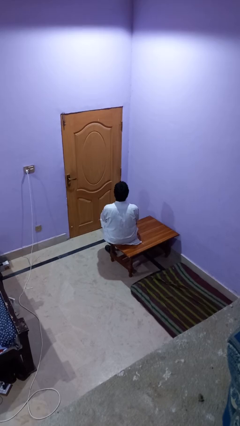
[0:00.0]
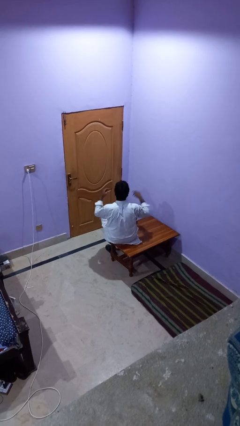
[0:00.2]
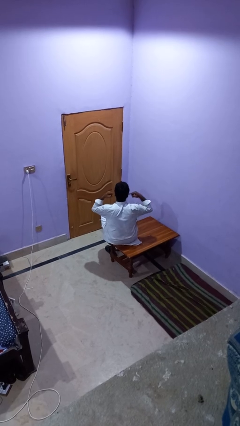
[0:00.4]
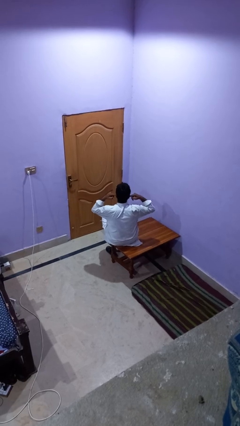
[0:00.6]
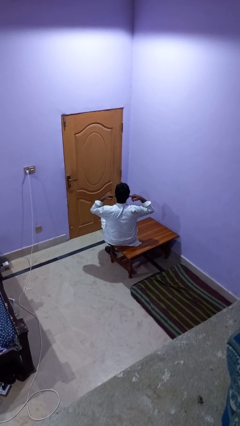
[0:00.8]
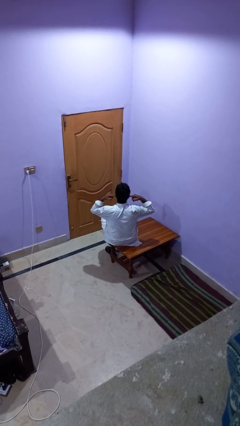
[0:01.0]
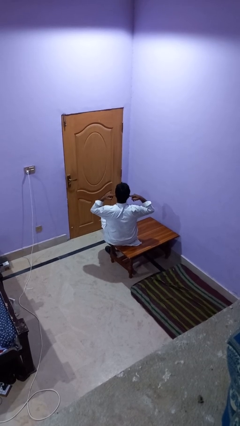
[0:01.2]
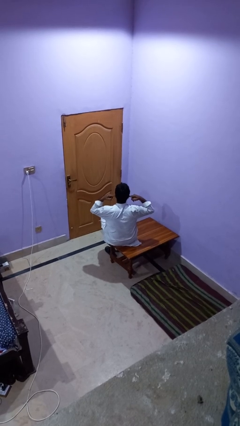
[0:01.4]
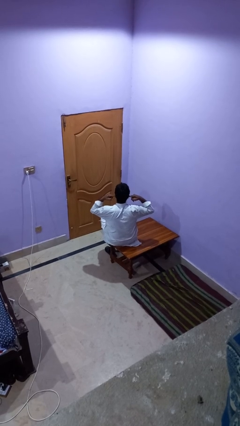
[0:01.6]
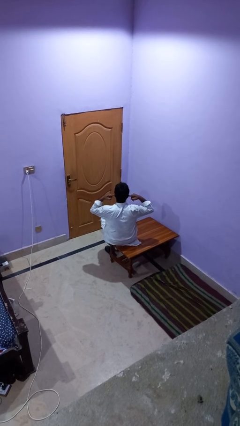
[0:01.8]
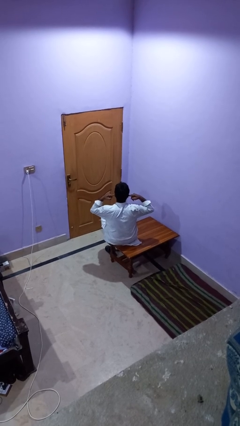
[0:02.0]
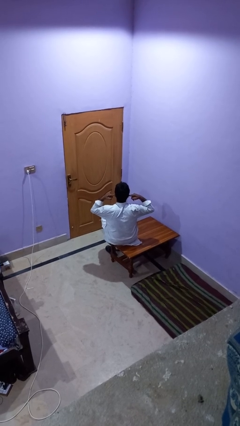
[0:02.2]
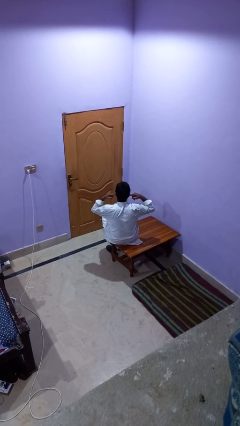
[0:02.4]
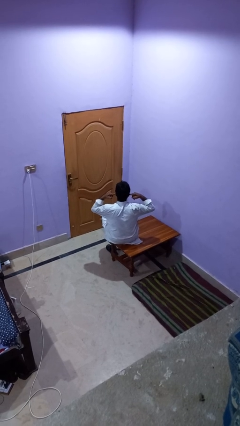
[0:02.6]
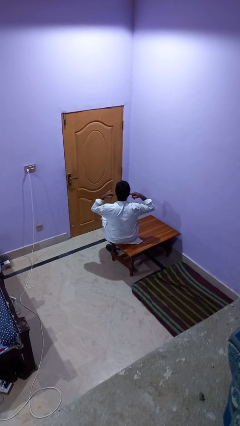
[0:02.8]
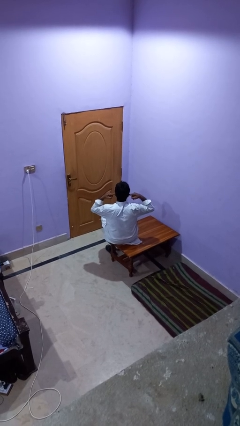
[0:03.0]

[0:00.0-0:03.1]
person puts fingers in ear

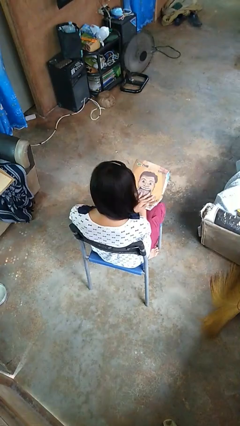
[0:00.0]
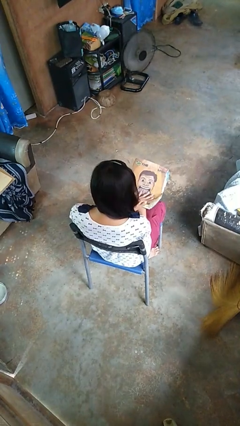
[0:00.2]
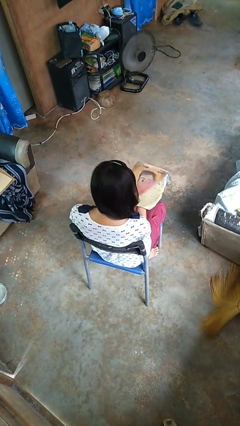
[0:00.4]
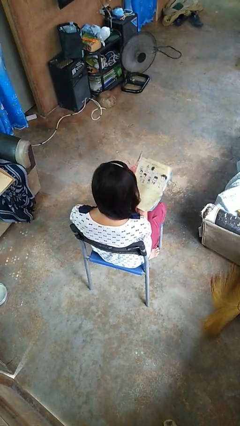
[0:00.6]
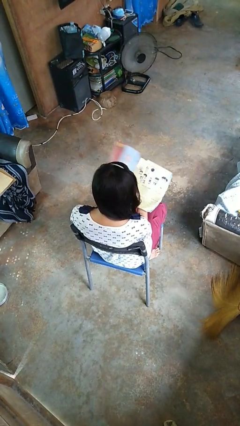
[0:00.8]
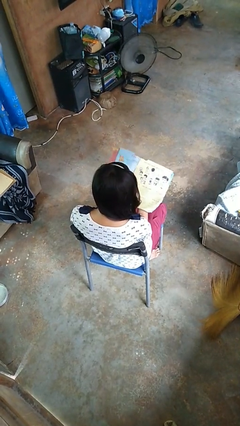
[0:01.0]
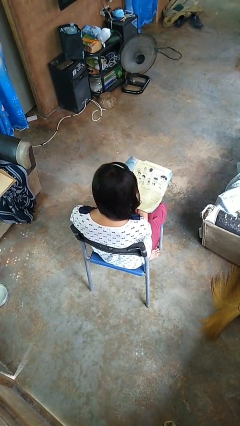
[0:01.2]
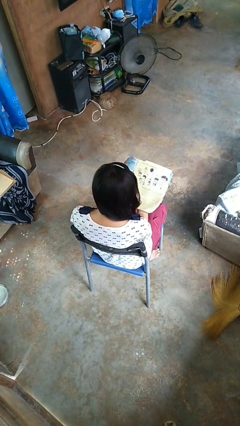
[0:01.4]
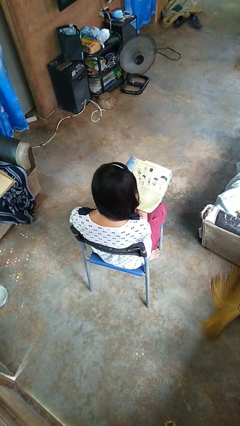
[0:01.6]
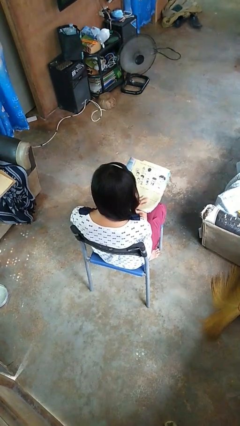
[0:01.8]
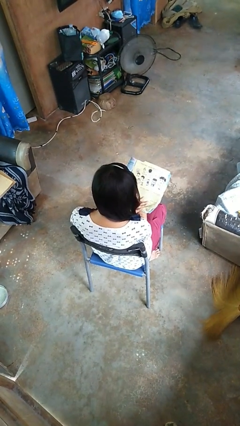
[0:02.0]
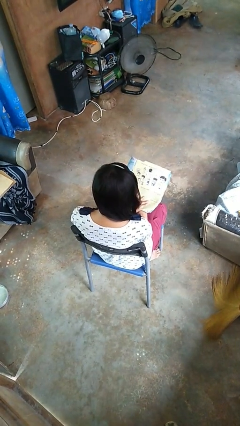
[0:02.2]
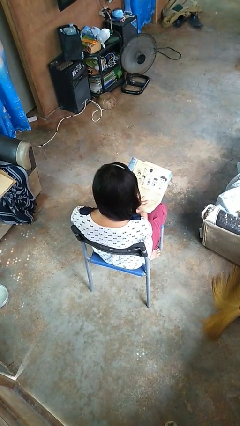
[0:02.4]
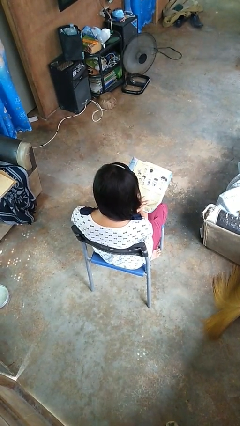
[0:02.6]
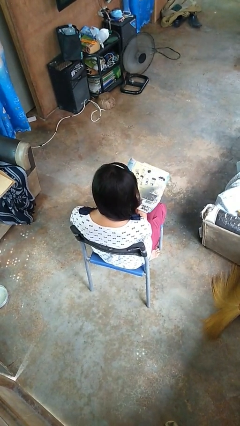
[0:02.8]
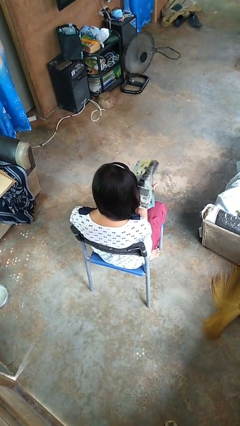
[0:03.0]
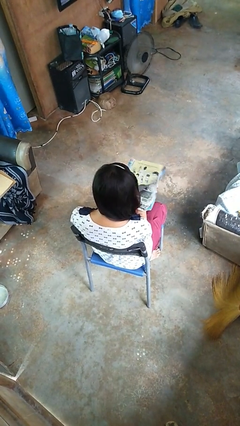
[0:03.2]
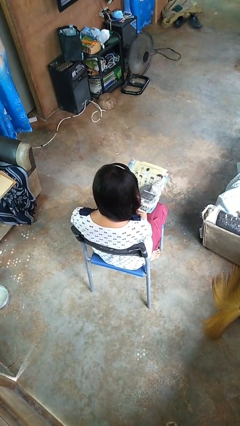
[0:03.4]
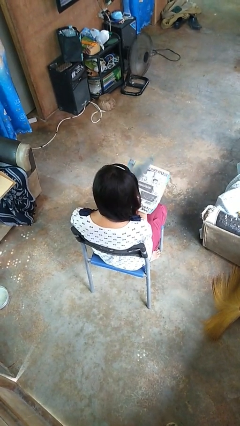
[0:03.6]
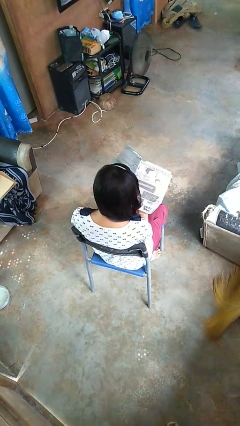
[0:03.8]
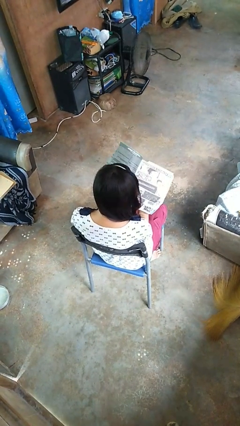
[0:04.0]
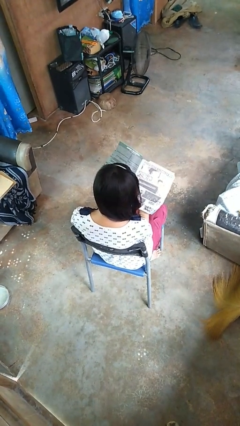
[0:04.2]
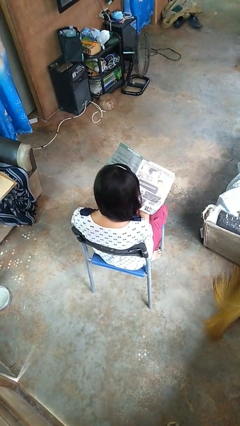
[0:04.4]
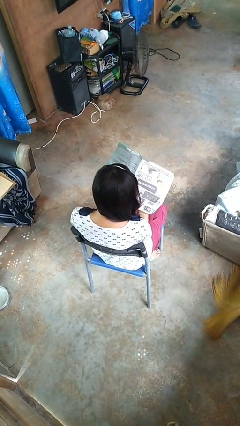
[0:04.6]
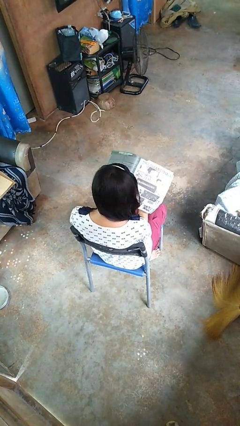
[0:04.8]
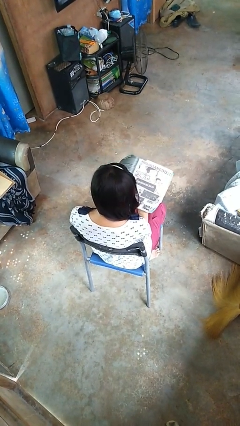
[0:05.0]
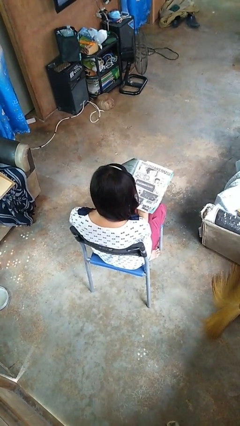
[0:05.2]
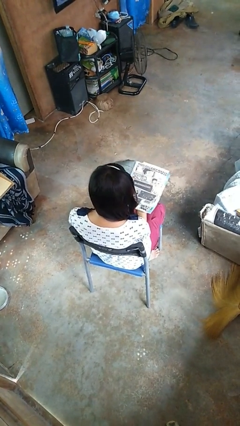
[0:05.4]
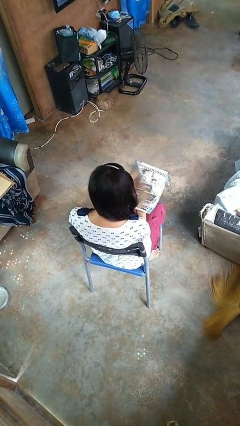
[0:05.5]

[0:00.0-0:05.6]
person reads magazine

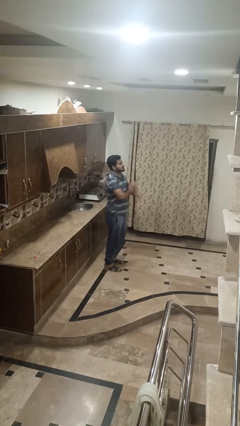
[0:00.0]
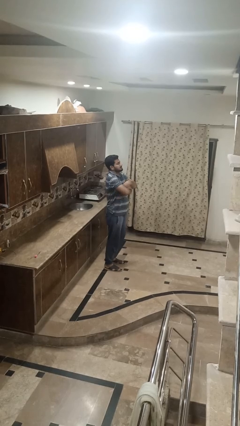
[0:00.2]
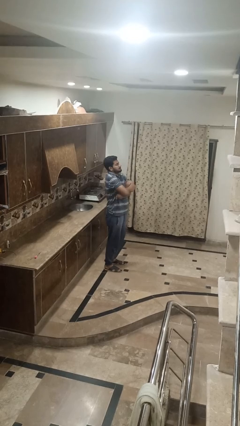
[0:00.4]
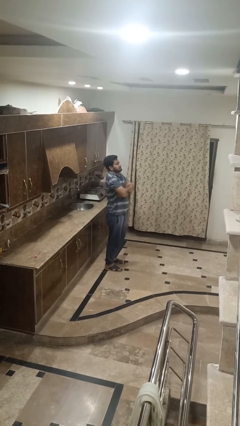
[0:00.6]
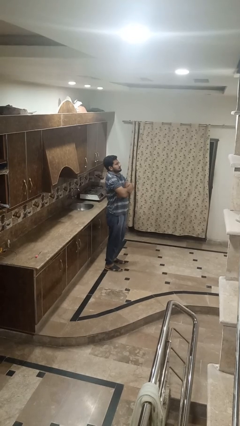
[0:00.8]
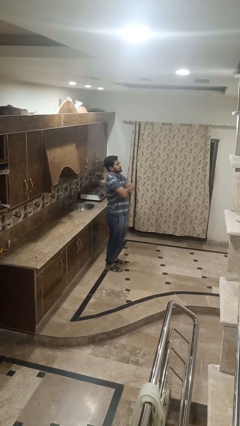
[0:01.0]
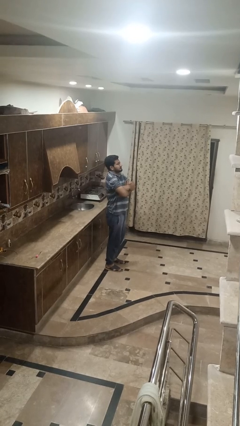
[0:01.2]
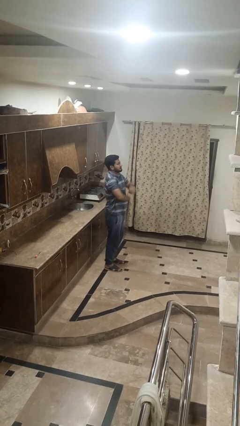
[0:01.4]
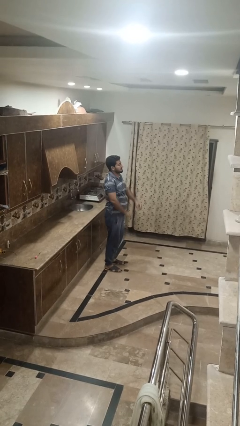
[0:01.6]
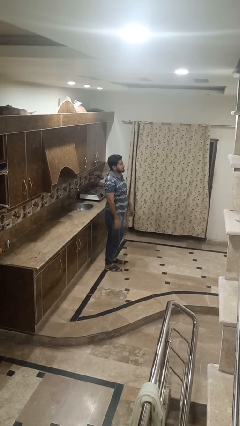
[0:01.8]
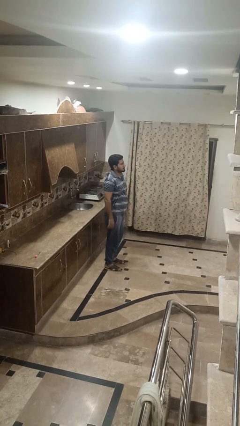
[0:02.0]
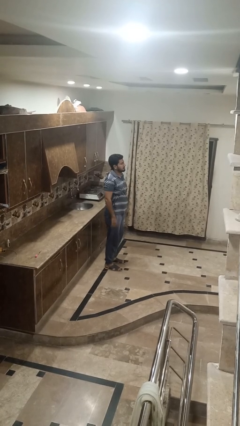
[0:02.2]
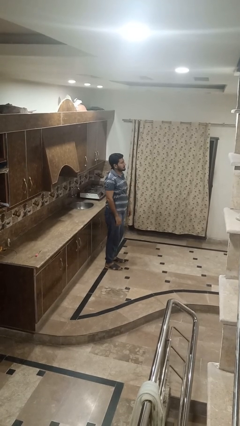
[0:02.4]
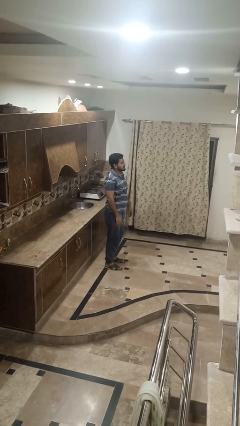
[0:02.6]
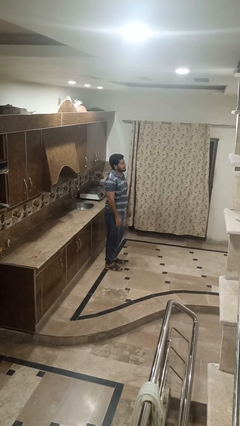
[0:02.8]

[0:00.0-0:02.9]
person crosses arms

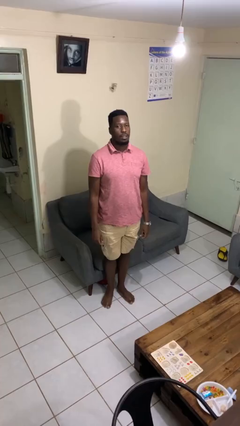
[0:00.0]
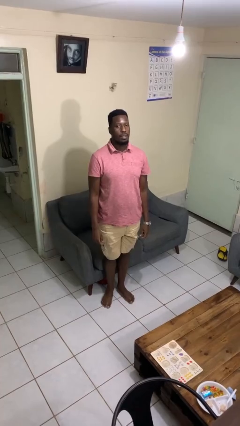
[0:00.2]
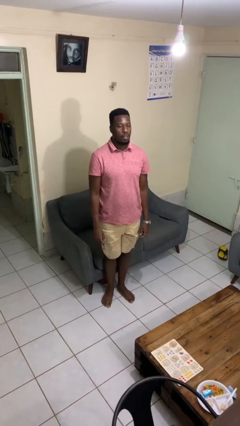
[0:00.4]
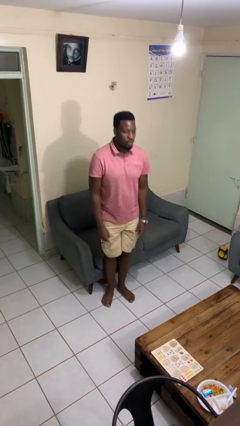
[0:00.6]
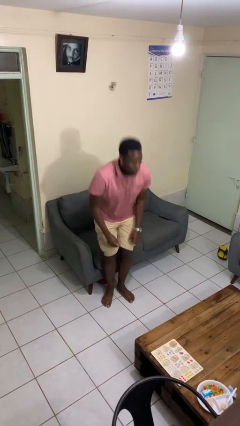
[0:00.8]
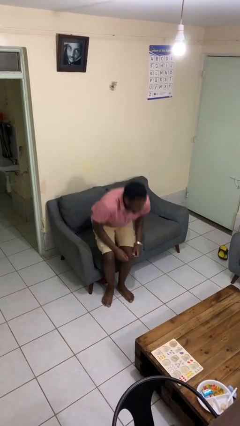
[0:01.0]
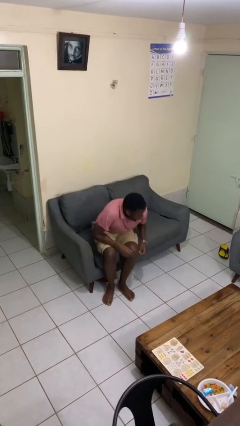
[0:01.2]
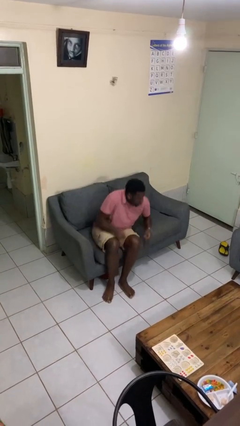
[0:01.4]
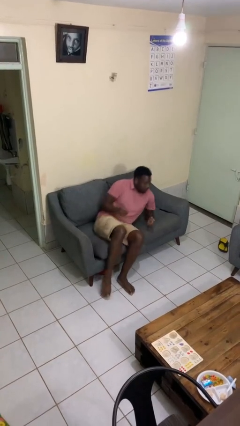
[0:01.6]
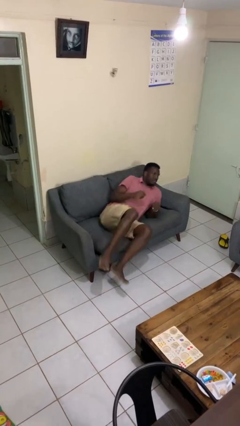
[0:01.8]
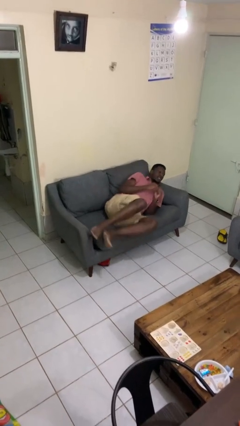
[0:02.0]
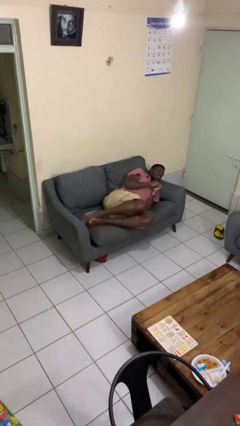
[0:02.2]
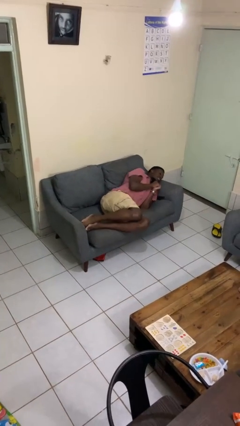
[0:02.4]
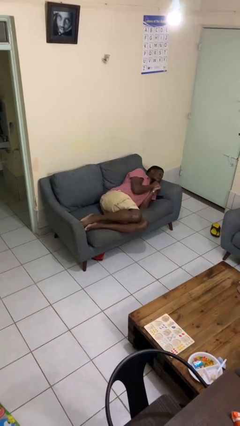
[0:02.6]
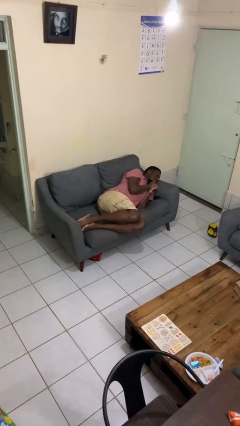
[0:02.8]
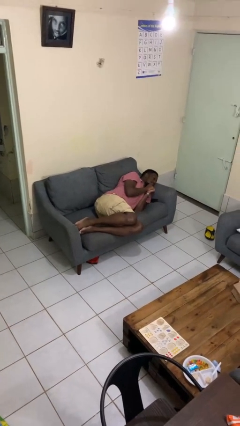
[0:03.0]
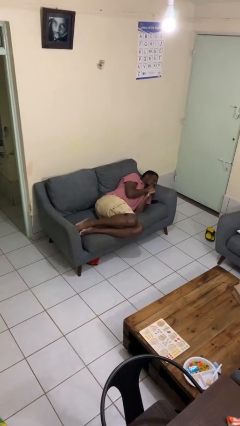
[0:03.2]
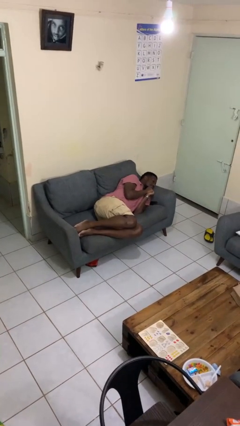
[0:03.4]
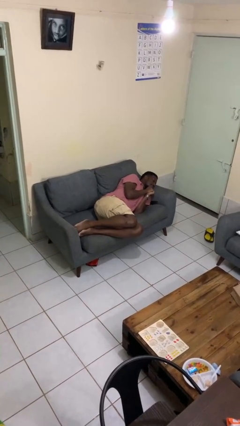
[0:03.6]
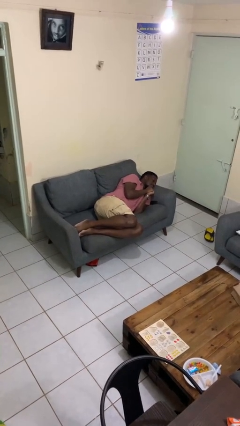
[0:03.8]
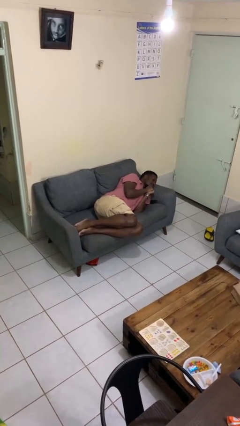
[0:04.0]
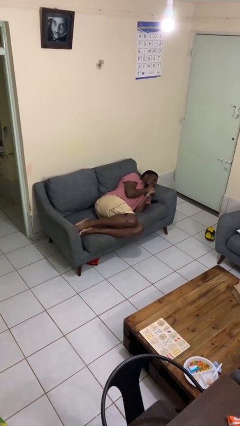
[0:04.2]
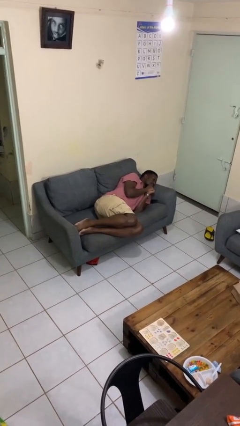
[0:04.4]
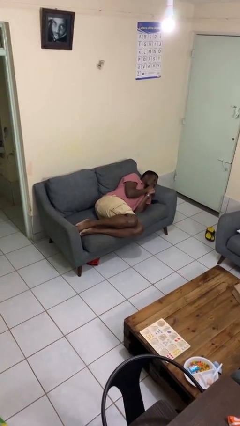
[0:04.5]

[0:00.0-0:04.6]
person lies down on couch

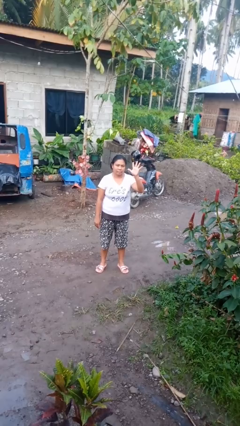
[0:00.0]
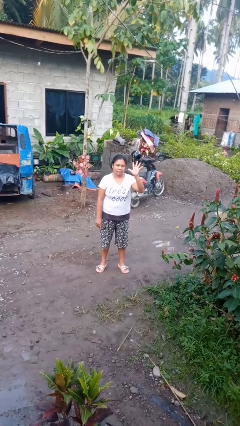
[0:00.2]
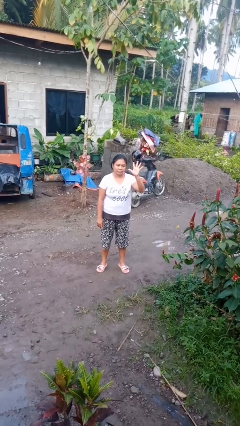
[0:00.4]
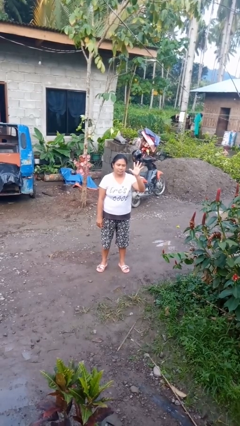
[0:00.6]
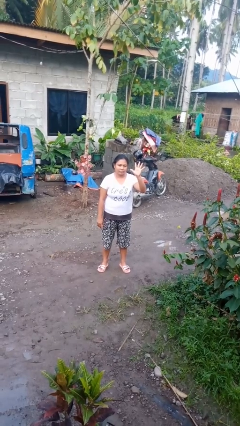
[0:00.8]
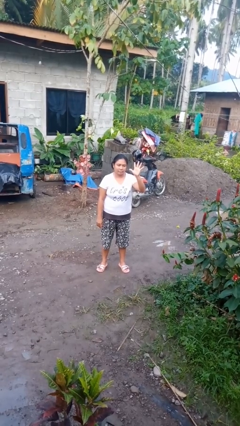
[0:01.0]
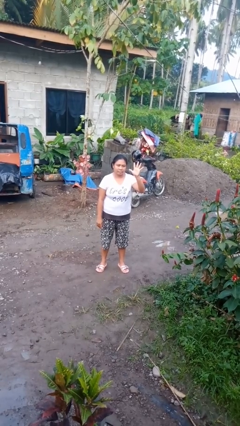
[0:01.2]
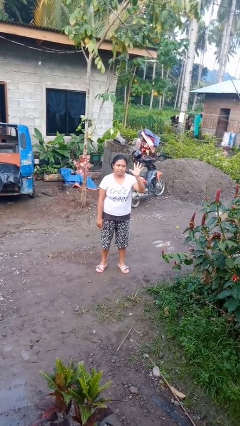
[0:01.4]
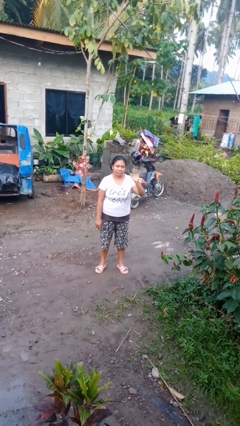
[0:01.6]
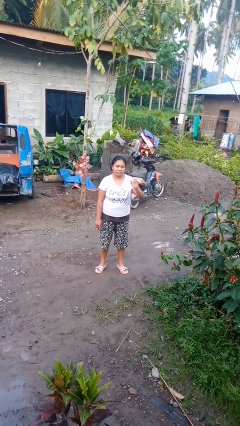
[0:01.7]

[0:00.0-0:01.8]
person gestures number five
